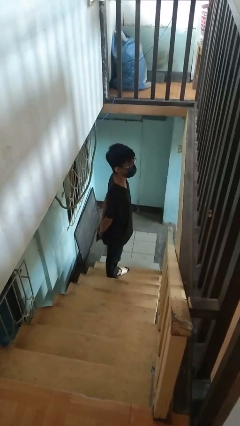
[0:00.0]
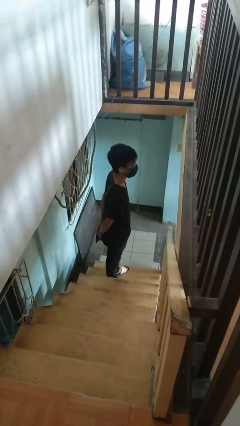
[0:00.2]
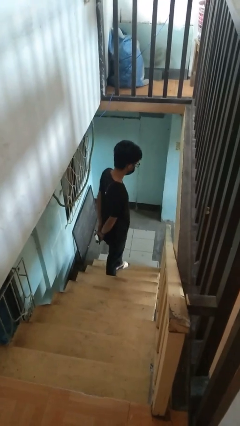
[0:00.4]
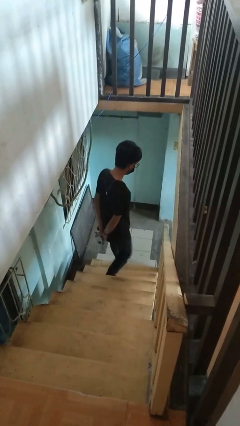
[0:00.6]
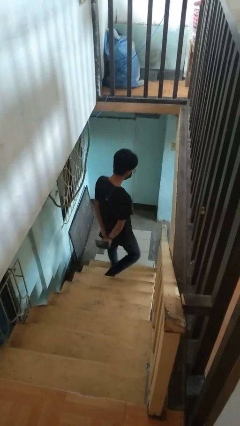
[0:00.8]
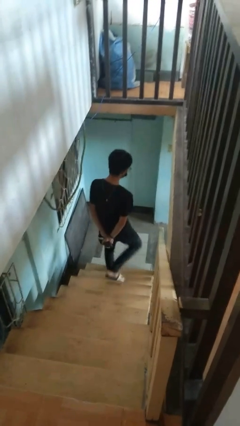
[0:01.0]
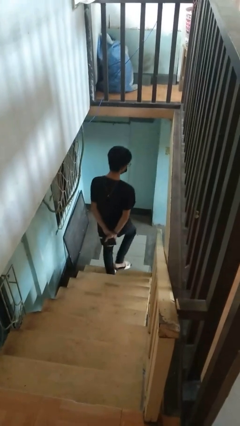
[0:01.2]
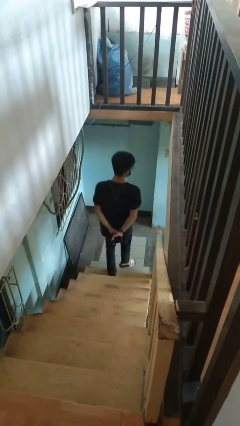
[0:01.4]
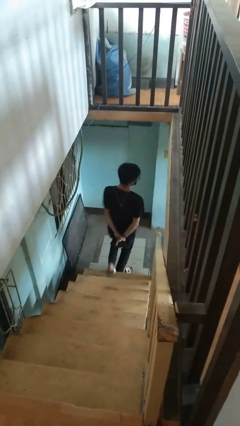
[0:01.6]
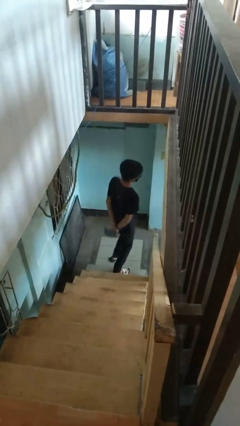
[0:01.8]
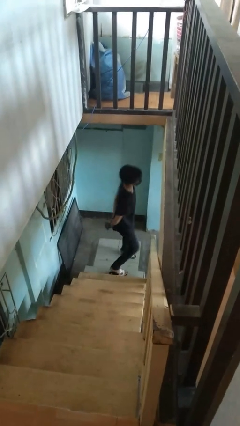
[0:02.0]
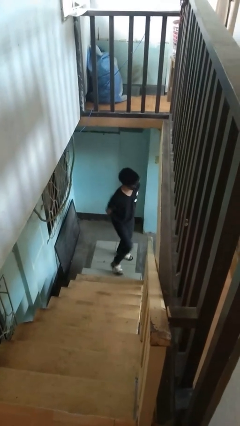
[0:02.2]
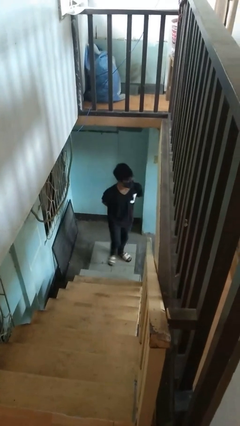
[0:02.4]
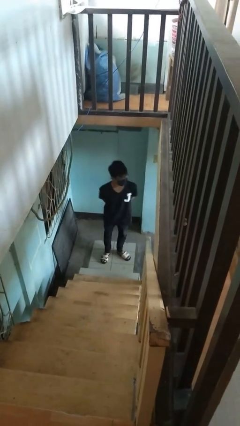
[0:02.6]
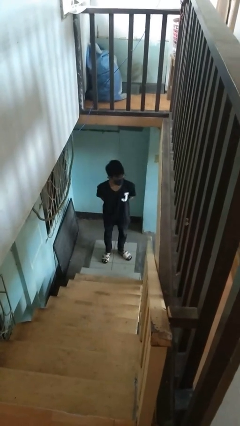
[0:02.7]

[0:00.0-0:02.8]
person climbs down ladder

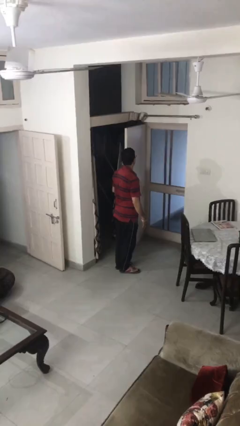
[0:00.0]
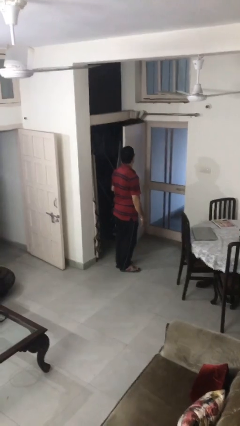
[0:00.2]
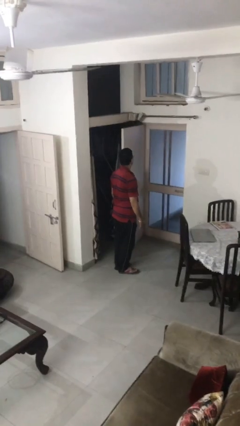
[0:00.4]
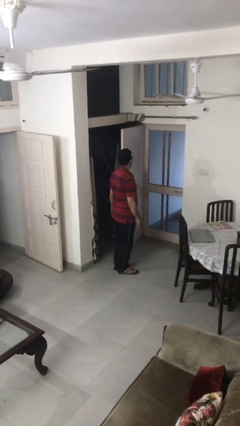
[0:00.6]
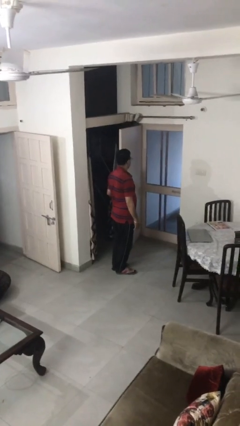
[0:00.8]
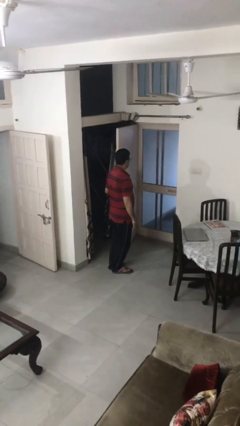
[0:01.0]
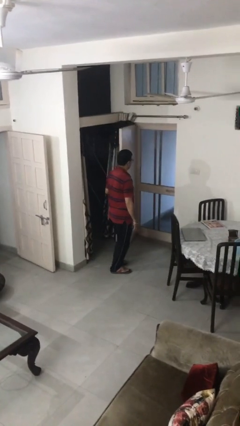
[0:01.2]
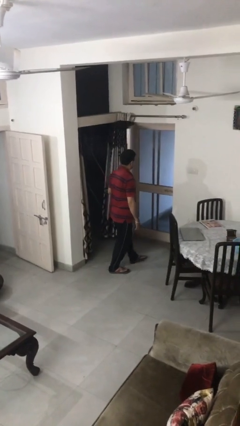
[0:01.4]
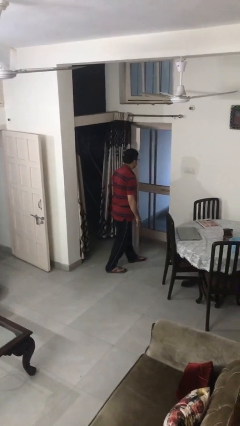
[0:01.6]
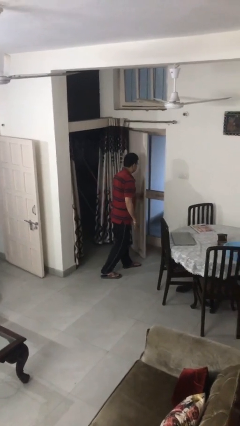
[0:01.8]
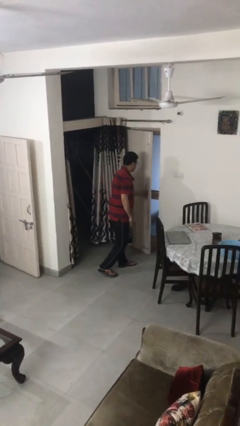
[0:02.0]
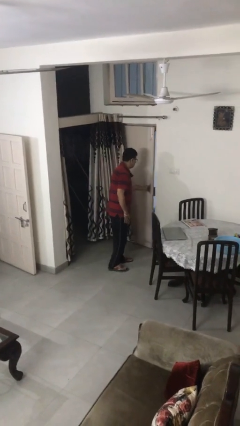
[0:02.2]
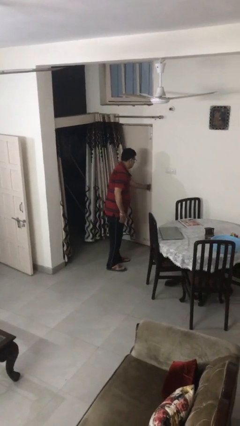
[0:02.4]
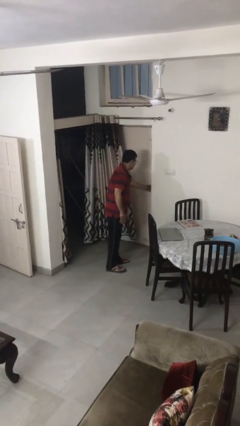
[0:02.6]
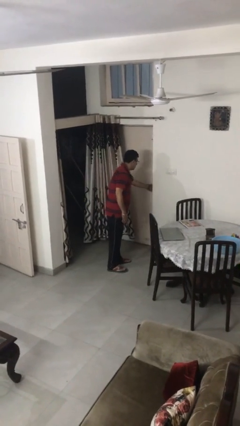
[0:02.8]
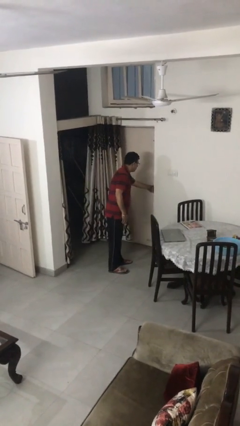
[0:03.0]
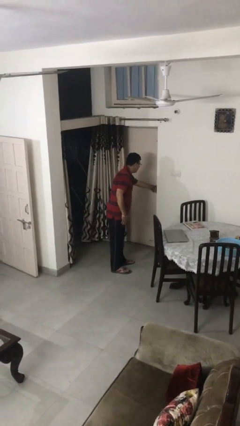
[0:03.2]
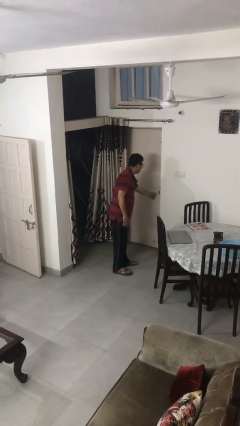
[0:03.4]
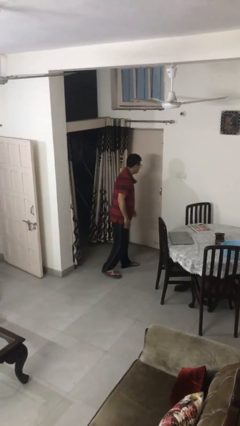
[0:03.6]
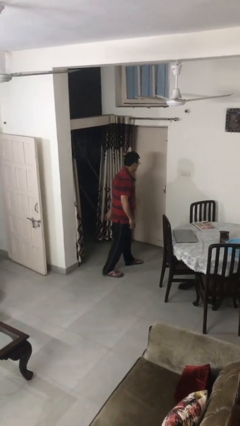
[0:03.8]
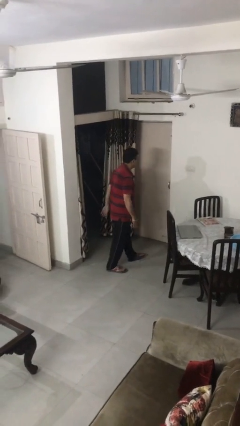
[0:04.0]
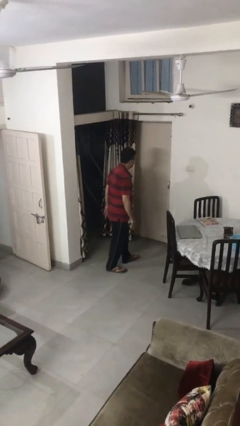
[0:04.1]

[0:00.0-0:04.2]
person closes facility door

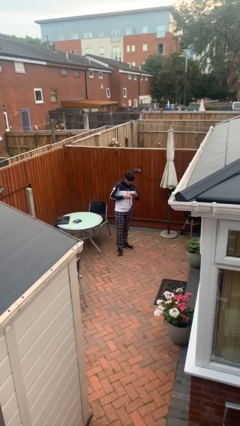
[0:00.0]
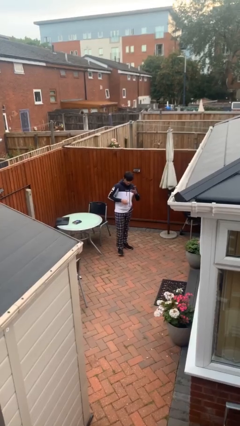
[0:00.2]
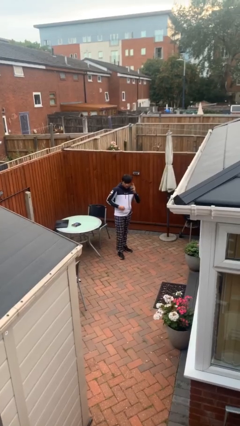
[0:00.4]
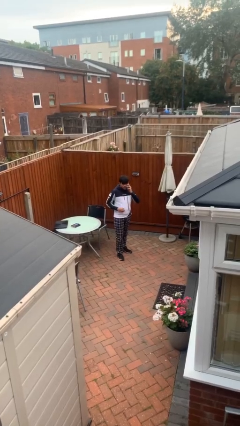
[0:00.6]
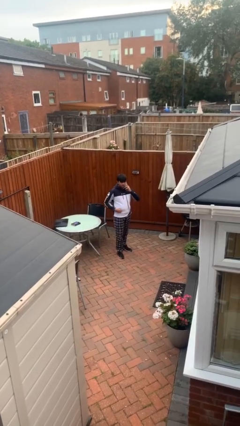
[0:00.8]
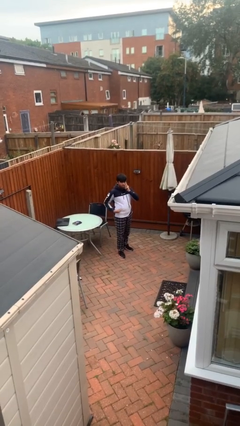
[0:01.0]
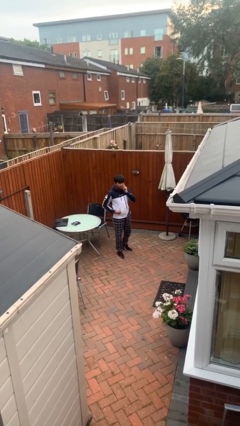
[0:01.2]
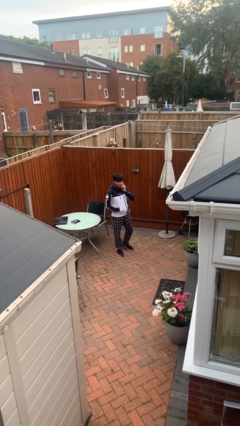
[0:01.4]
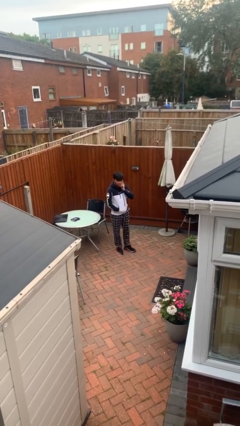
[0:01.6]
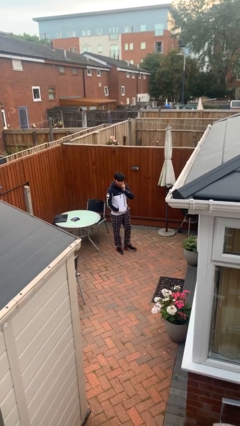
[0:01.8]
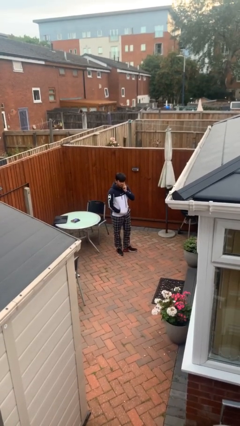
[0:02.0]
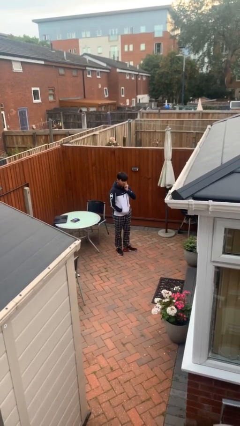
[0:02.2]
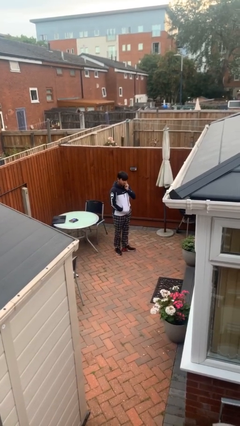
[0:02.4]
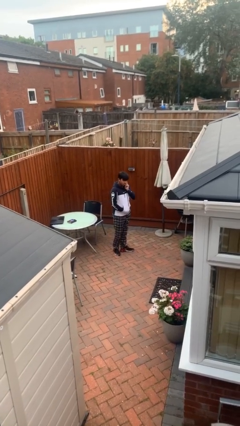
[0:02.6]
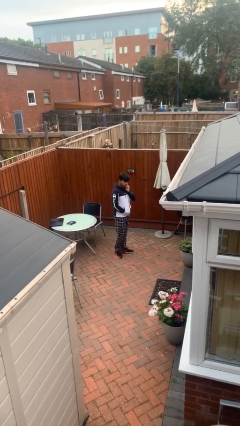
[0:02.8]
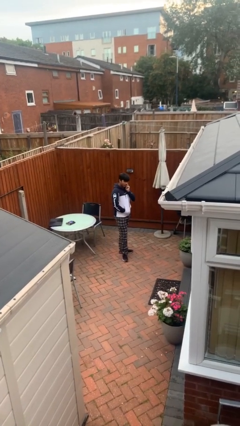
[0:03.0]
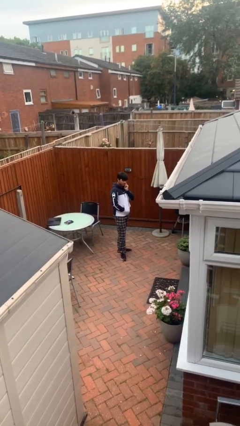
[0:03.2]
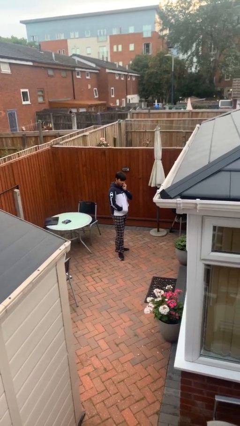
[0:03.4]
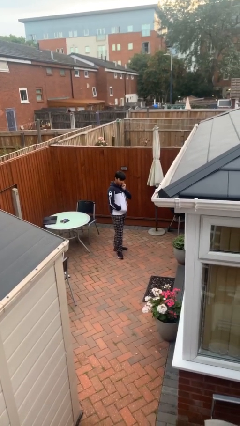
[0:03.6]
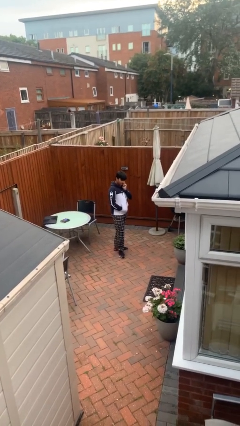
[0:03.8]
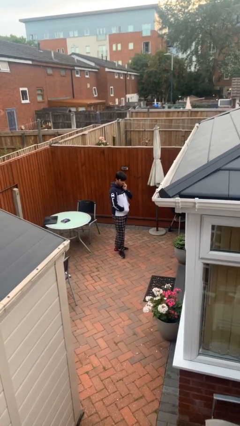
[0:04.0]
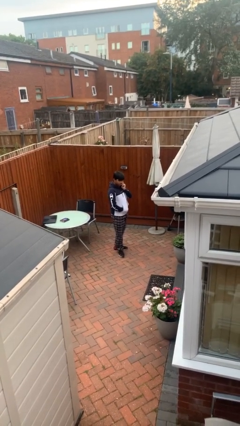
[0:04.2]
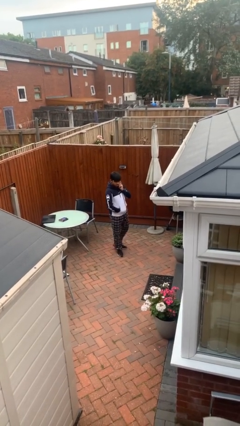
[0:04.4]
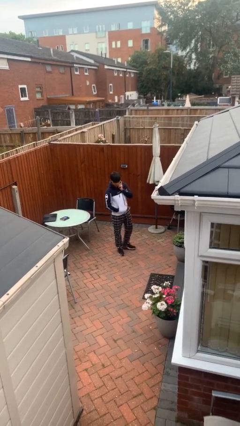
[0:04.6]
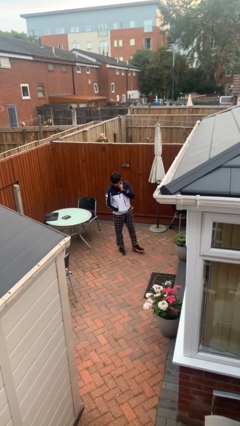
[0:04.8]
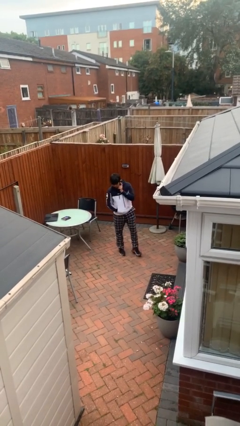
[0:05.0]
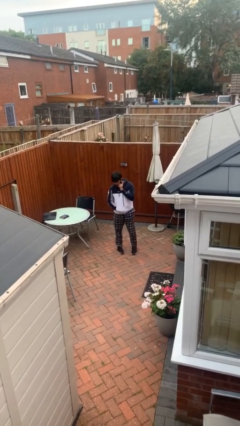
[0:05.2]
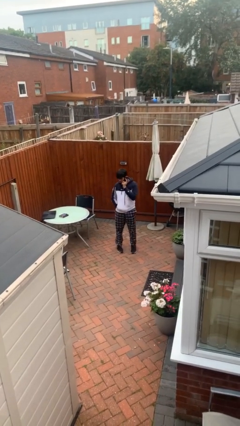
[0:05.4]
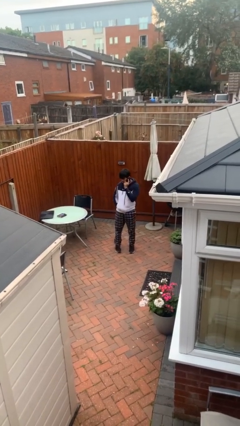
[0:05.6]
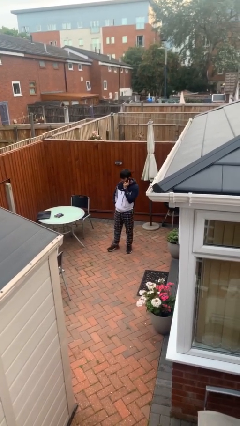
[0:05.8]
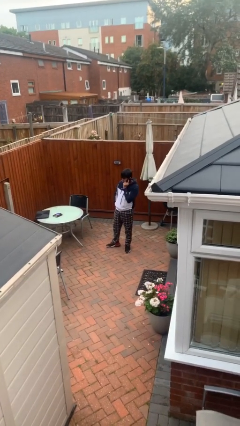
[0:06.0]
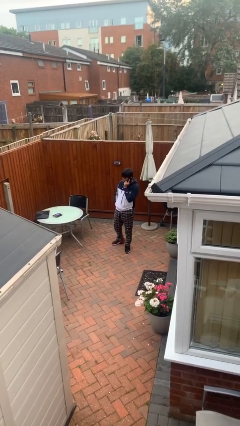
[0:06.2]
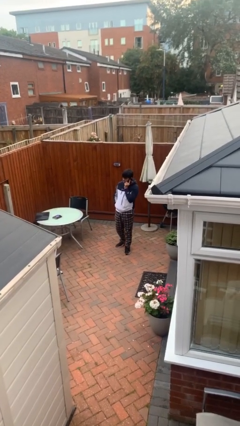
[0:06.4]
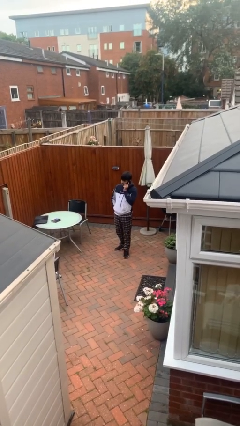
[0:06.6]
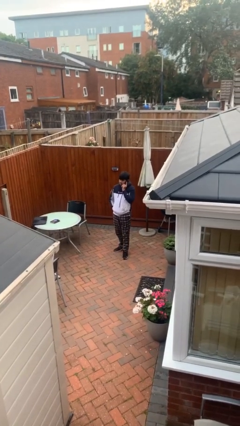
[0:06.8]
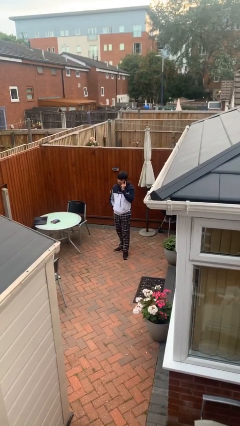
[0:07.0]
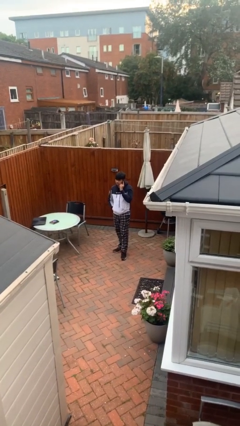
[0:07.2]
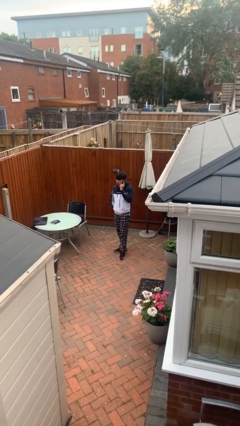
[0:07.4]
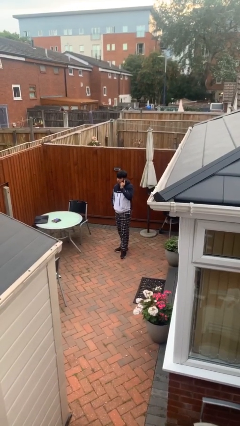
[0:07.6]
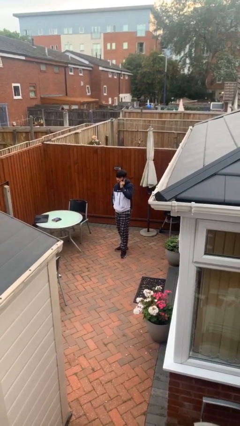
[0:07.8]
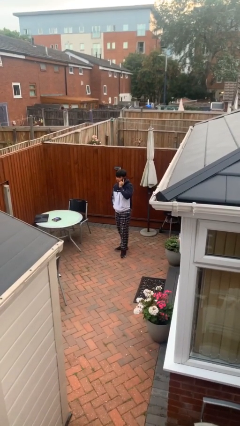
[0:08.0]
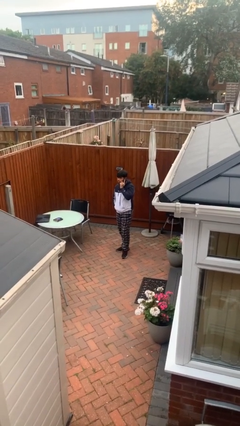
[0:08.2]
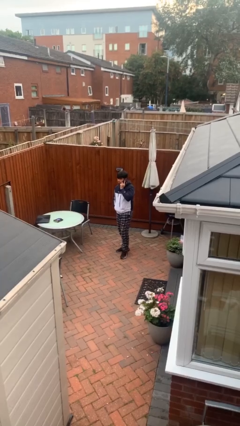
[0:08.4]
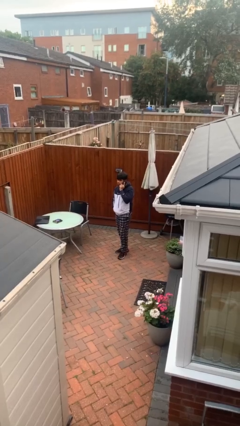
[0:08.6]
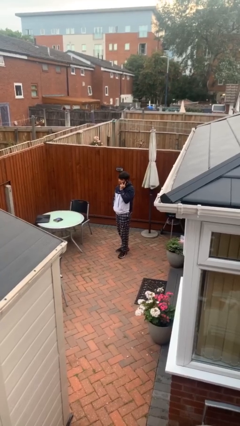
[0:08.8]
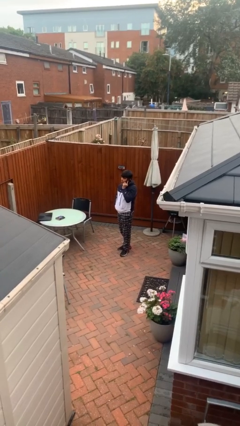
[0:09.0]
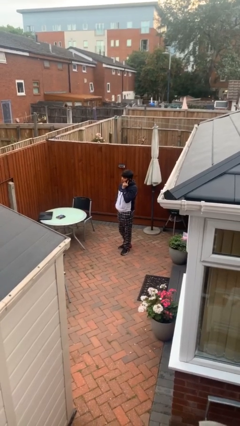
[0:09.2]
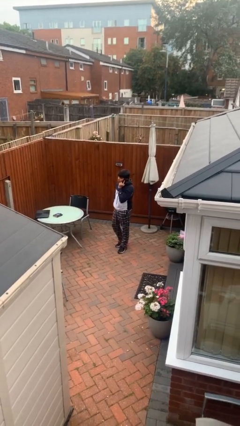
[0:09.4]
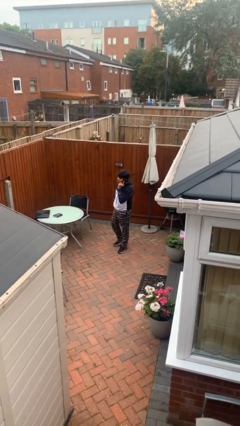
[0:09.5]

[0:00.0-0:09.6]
person talks on phone

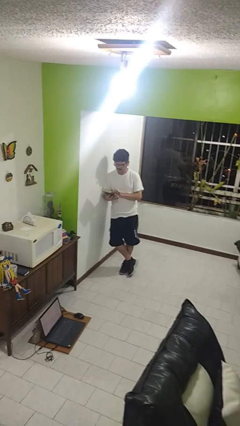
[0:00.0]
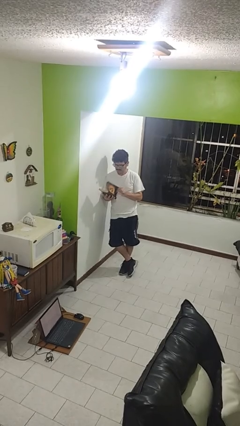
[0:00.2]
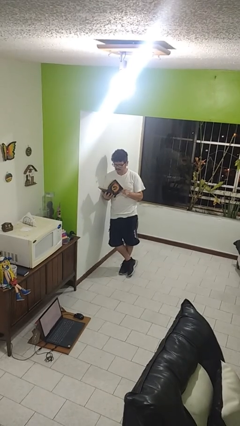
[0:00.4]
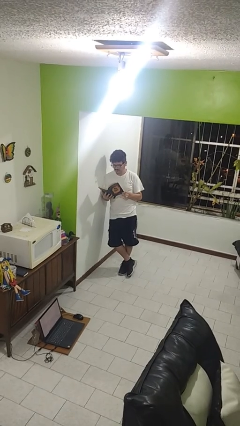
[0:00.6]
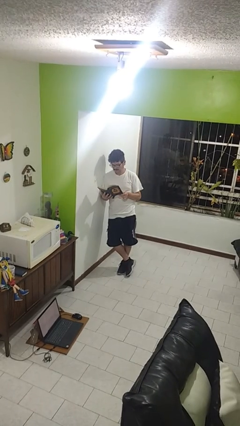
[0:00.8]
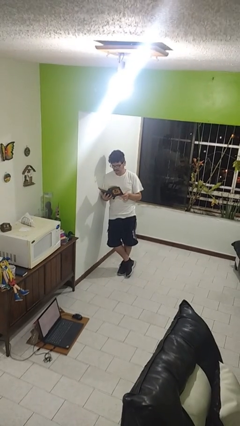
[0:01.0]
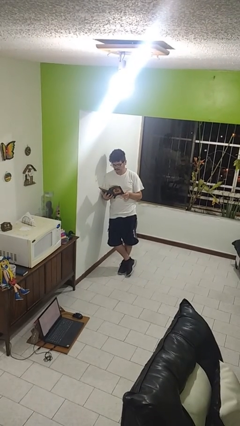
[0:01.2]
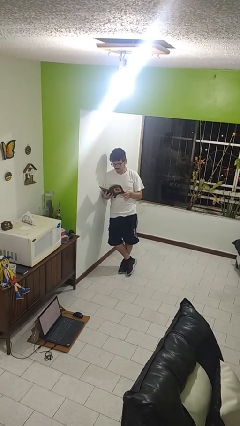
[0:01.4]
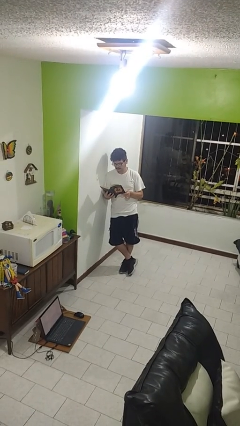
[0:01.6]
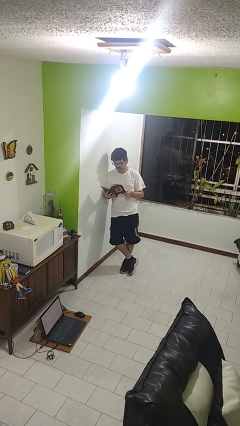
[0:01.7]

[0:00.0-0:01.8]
person reads book
